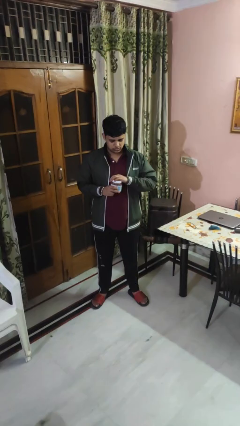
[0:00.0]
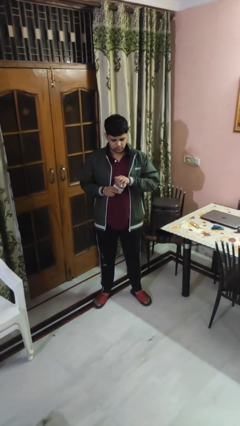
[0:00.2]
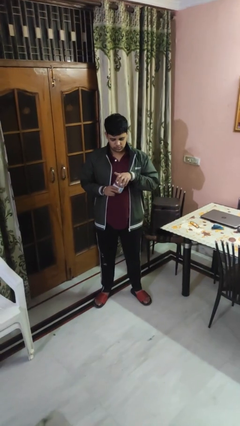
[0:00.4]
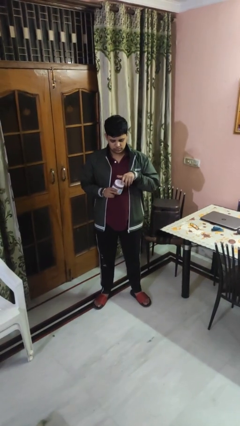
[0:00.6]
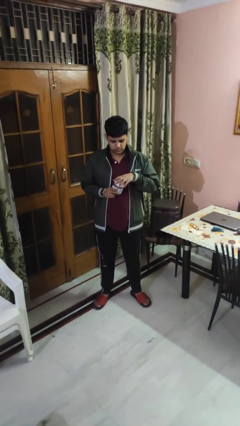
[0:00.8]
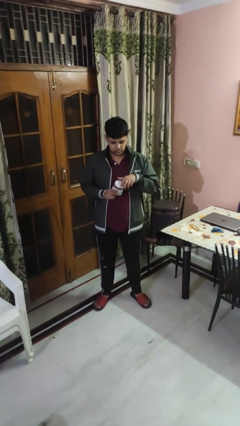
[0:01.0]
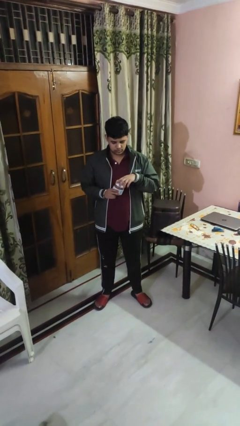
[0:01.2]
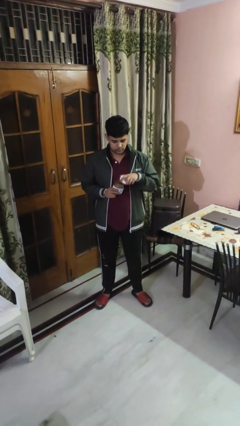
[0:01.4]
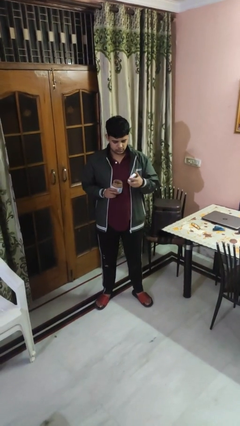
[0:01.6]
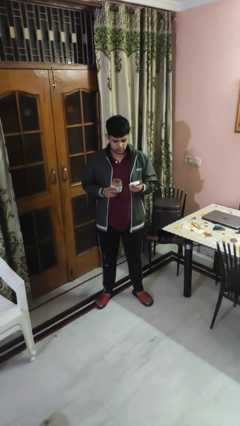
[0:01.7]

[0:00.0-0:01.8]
person opens jar

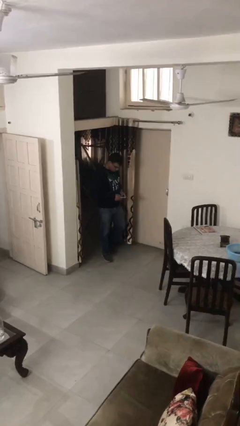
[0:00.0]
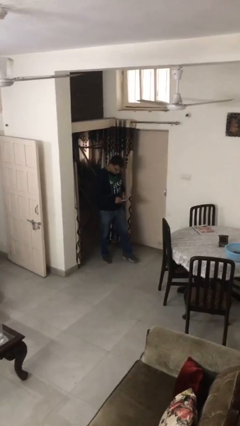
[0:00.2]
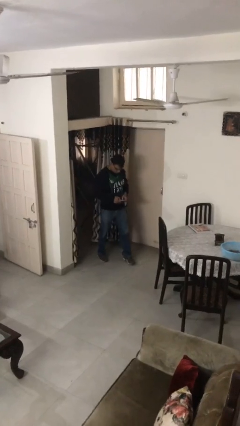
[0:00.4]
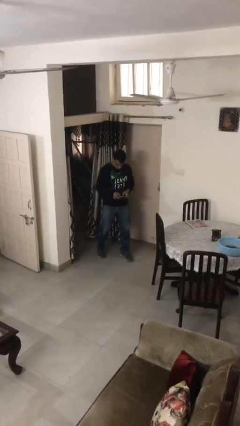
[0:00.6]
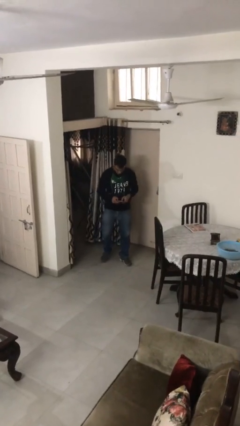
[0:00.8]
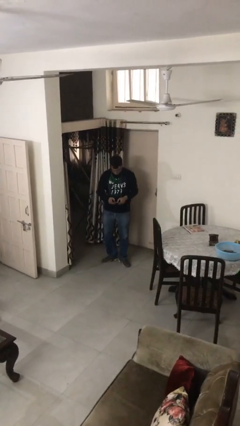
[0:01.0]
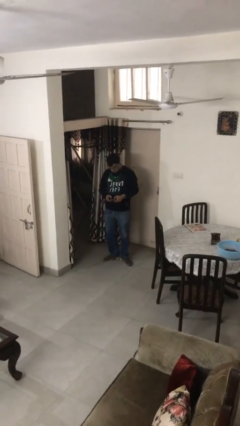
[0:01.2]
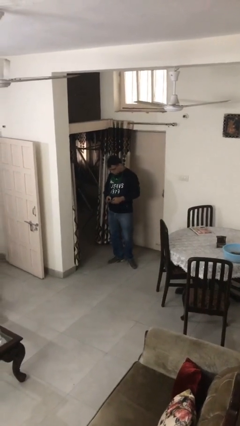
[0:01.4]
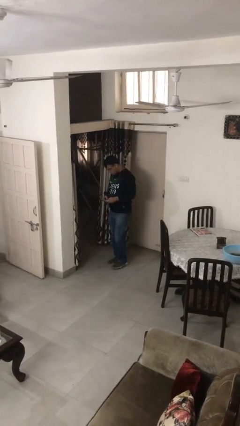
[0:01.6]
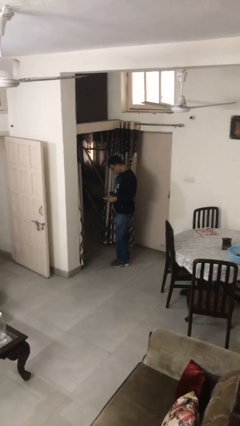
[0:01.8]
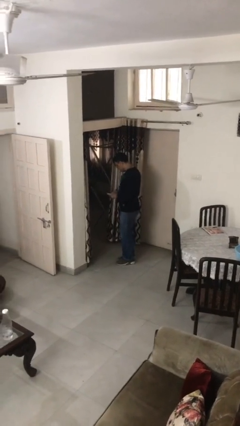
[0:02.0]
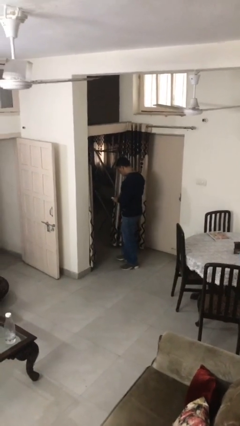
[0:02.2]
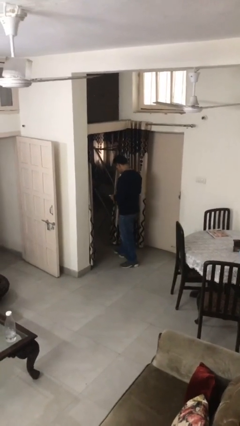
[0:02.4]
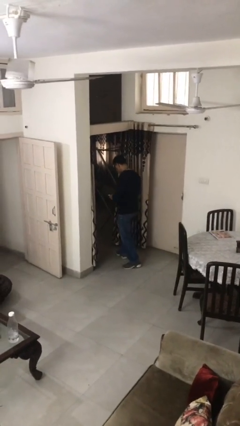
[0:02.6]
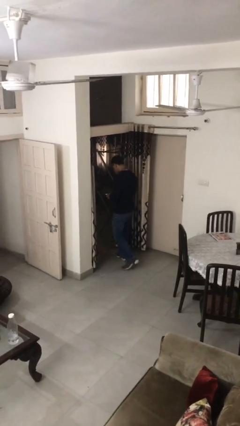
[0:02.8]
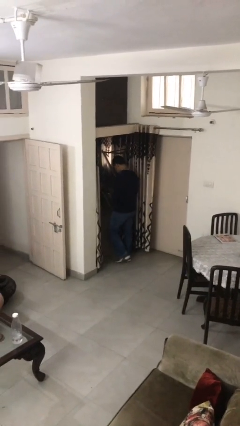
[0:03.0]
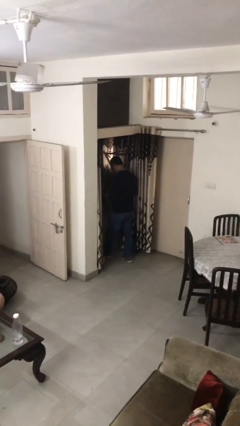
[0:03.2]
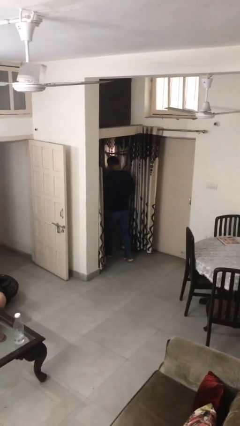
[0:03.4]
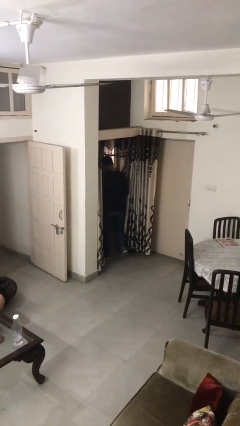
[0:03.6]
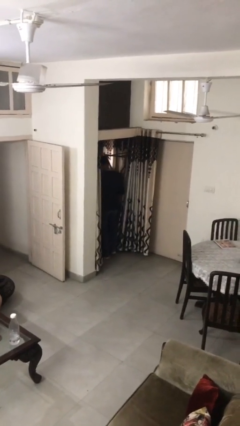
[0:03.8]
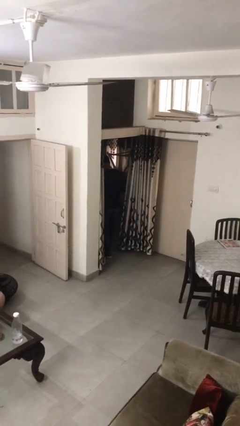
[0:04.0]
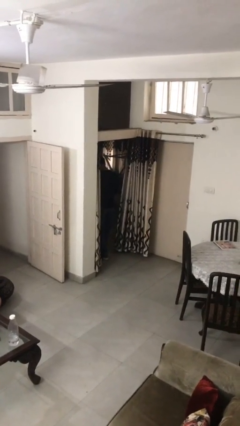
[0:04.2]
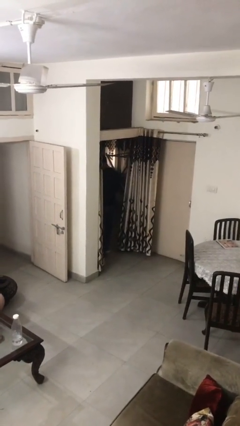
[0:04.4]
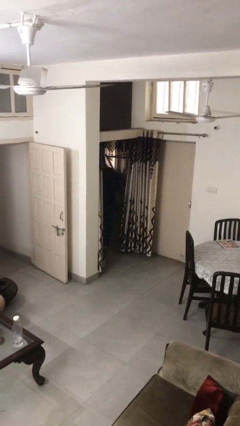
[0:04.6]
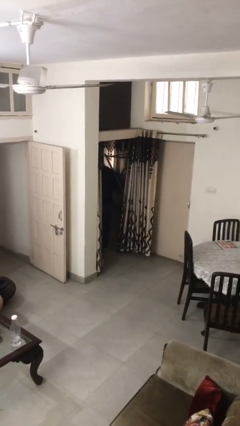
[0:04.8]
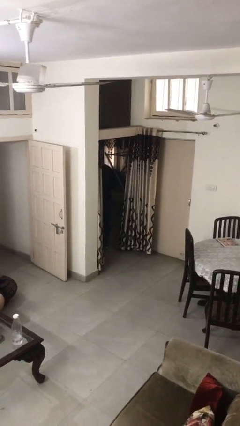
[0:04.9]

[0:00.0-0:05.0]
person exits scene through structure

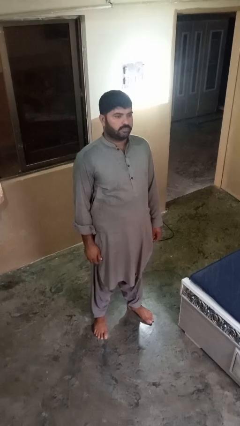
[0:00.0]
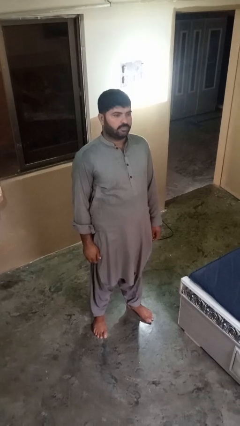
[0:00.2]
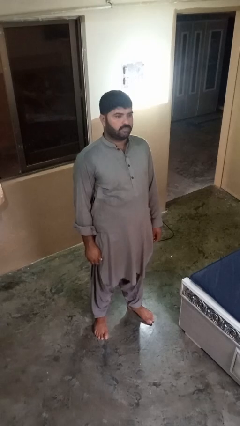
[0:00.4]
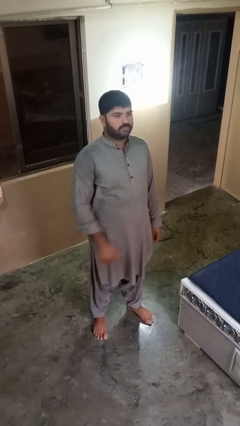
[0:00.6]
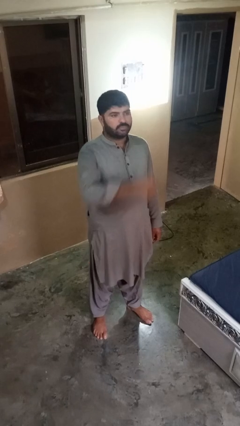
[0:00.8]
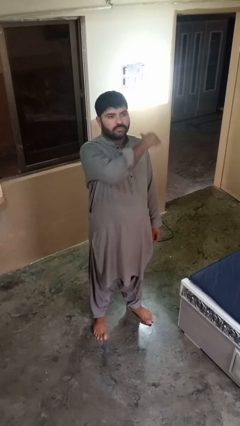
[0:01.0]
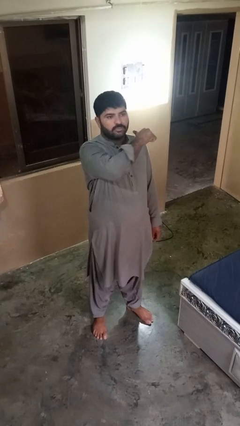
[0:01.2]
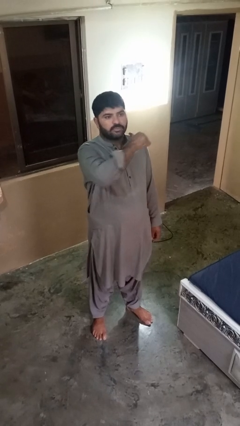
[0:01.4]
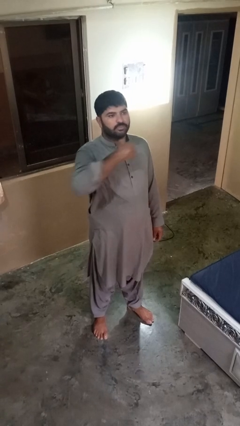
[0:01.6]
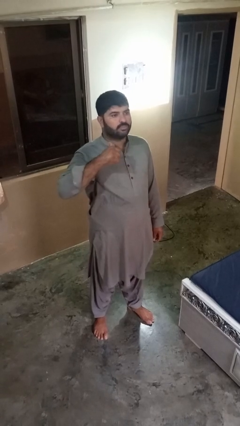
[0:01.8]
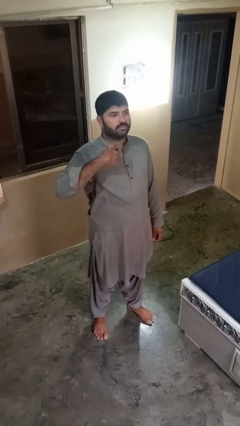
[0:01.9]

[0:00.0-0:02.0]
person gestures cut

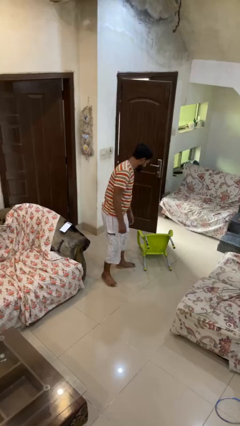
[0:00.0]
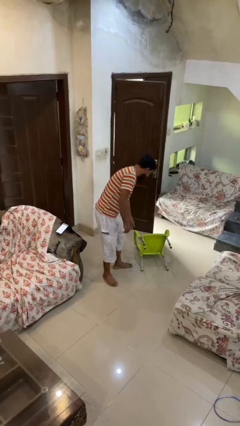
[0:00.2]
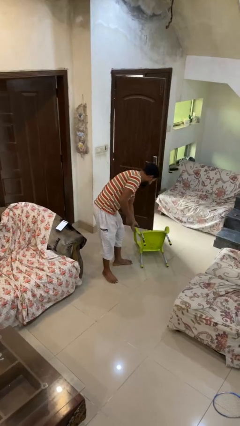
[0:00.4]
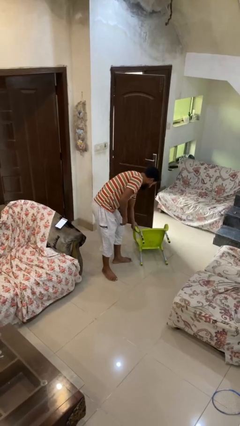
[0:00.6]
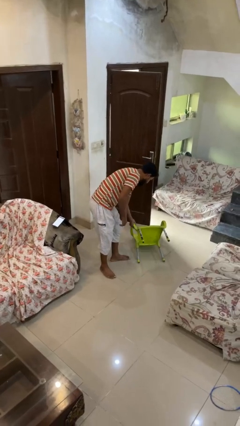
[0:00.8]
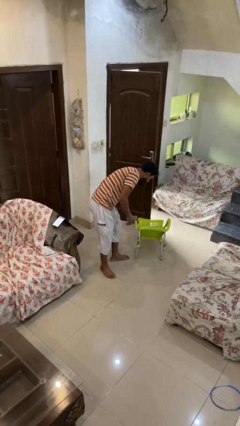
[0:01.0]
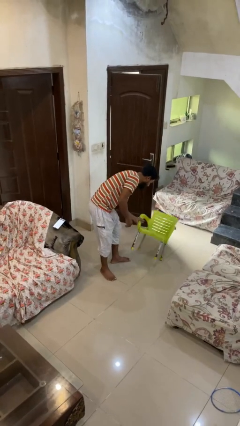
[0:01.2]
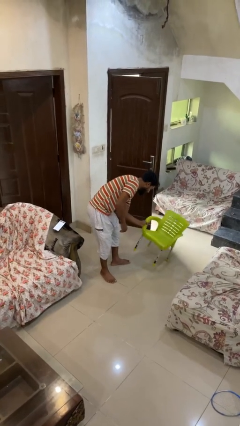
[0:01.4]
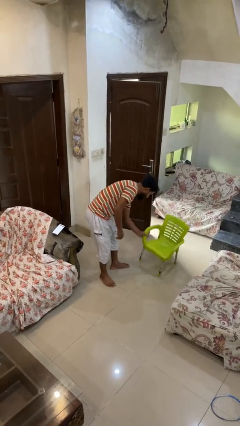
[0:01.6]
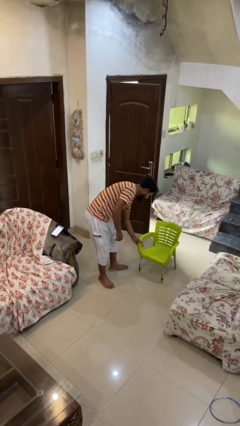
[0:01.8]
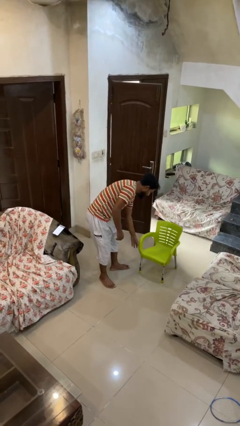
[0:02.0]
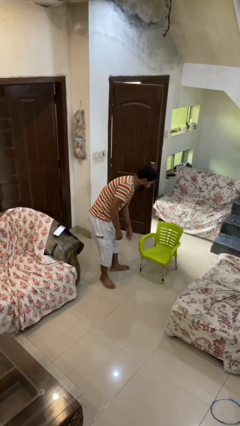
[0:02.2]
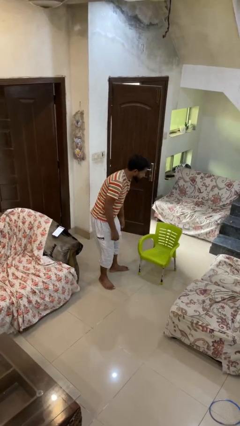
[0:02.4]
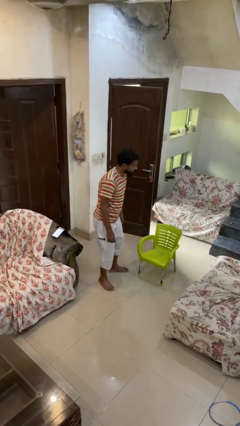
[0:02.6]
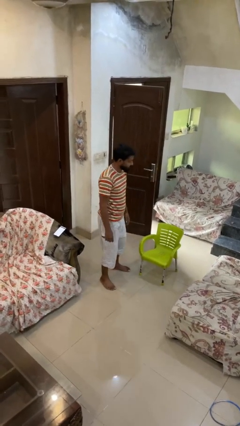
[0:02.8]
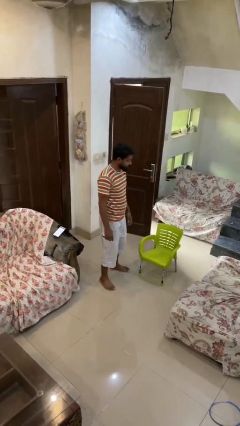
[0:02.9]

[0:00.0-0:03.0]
person sets upright furniture

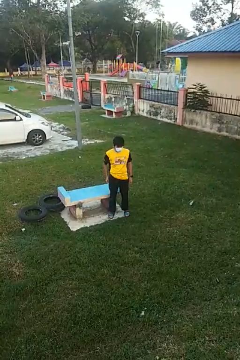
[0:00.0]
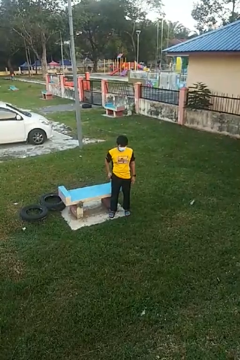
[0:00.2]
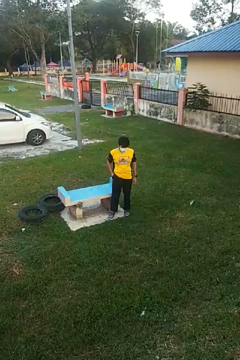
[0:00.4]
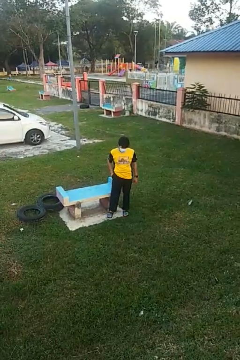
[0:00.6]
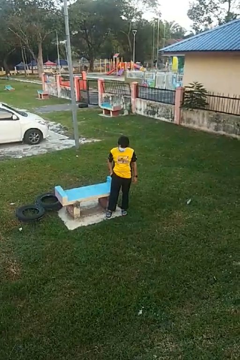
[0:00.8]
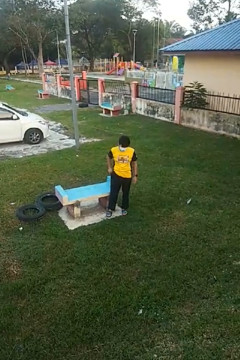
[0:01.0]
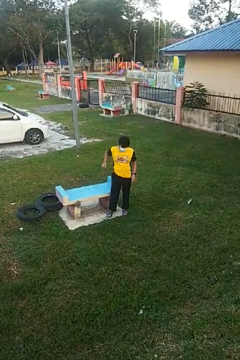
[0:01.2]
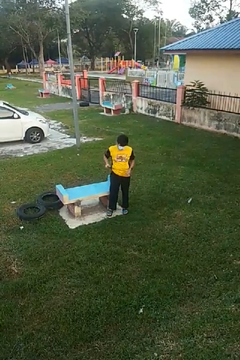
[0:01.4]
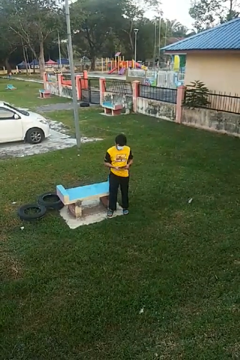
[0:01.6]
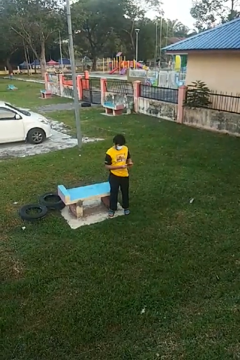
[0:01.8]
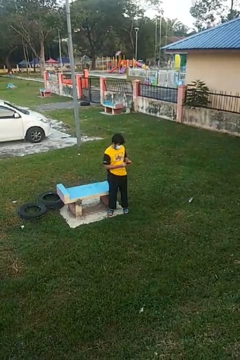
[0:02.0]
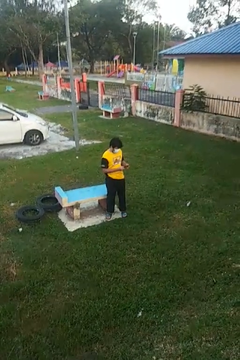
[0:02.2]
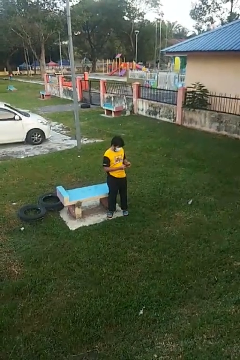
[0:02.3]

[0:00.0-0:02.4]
person takes phone from pocket

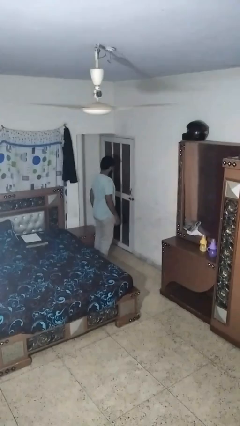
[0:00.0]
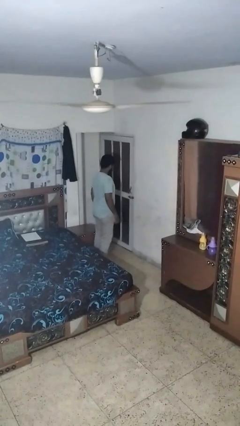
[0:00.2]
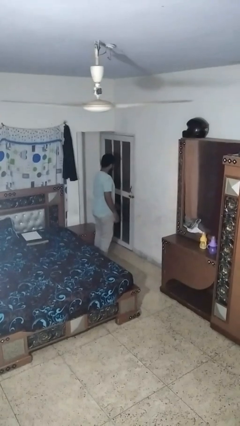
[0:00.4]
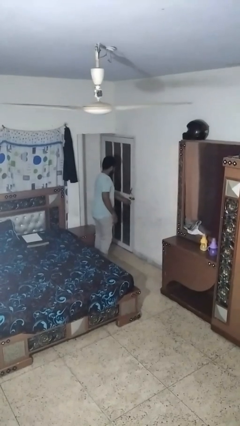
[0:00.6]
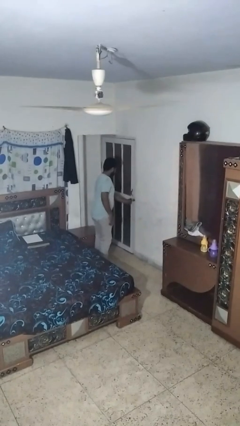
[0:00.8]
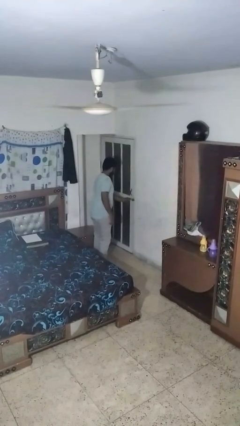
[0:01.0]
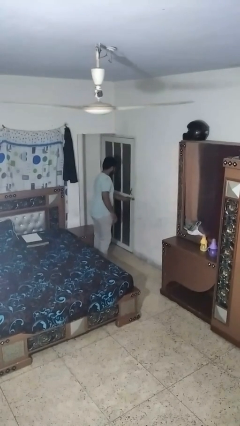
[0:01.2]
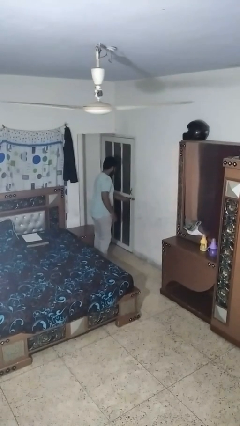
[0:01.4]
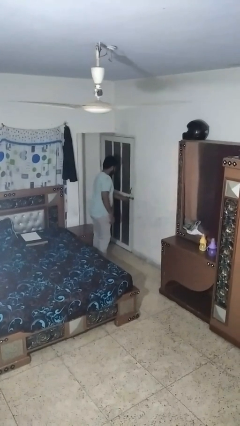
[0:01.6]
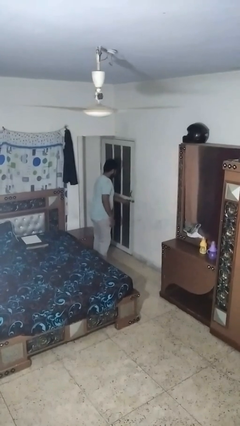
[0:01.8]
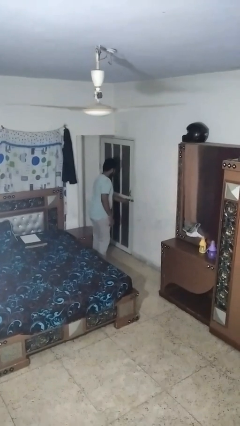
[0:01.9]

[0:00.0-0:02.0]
person unlocks door with keys

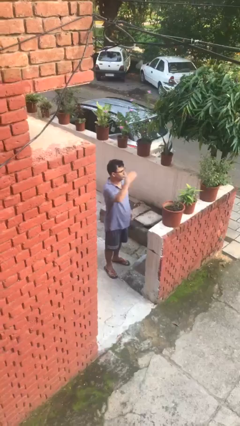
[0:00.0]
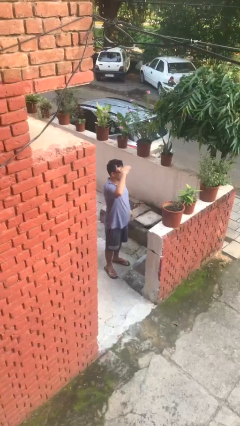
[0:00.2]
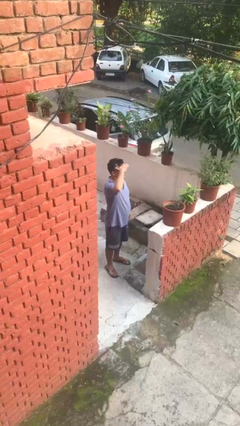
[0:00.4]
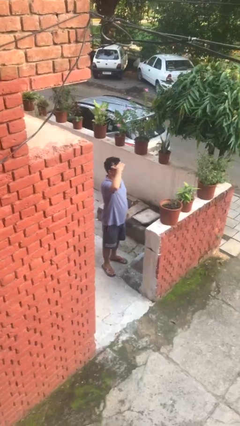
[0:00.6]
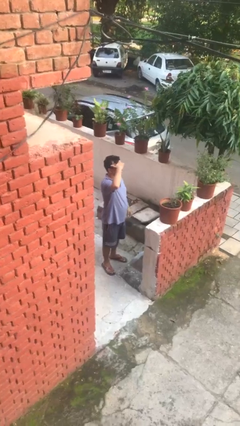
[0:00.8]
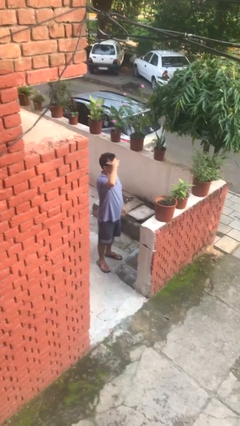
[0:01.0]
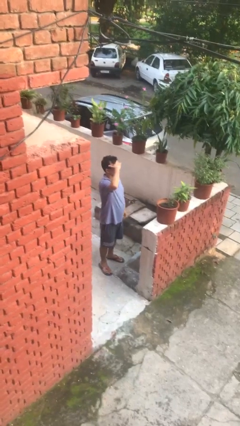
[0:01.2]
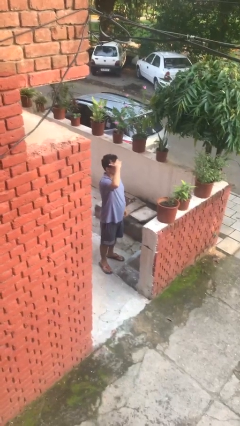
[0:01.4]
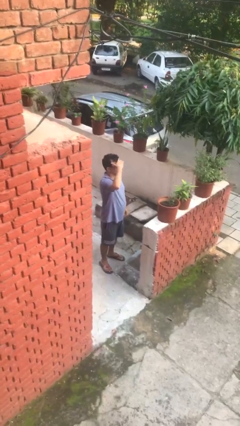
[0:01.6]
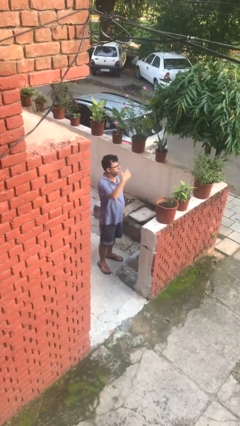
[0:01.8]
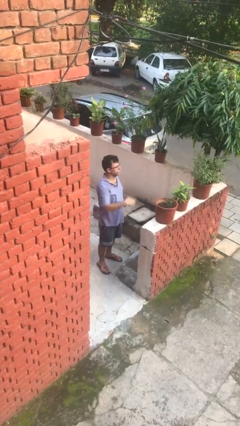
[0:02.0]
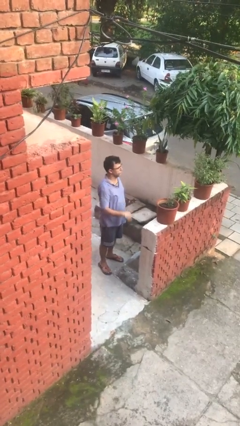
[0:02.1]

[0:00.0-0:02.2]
person shades eyes
